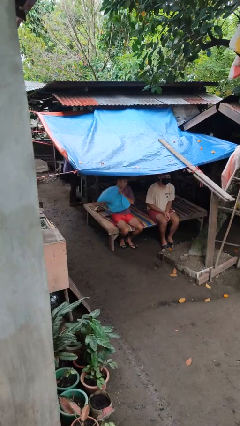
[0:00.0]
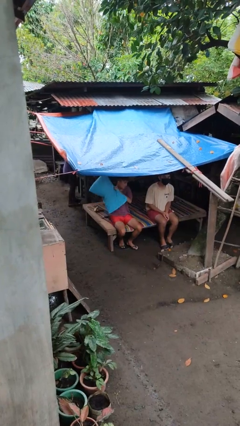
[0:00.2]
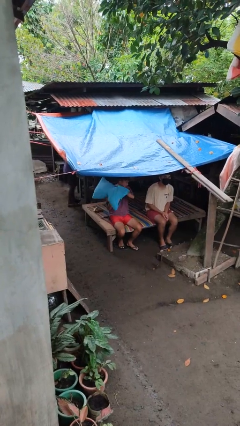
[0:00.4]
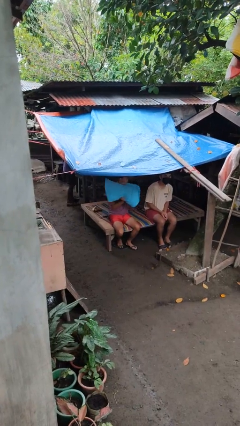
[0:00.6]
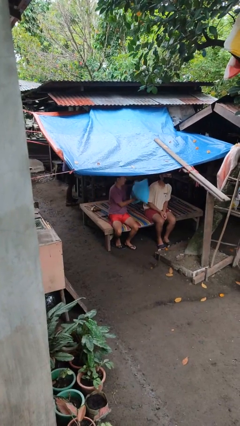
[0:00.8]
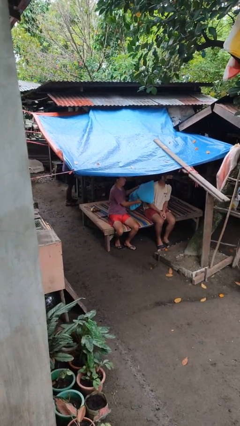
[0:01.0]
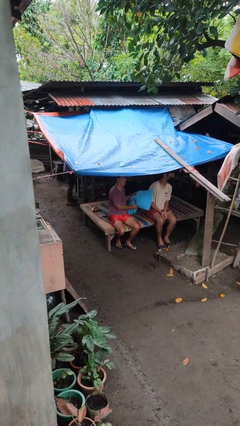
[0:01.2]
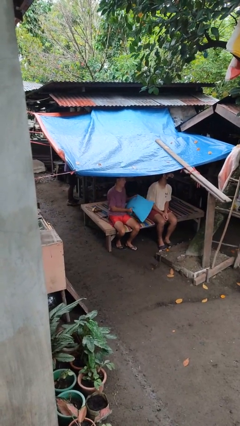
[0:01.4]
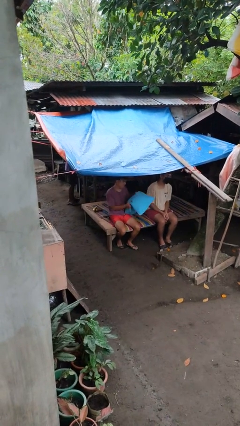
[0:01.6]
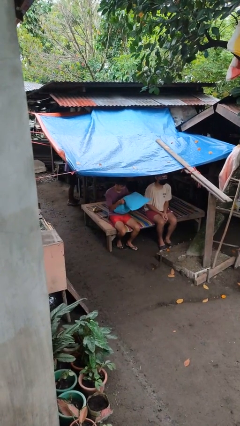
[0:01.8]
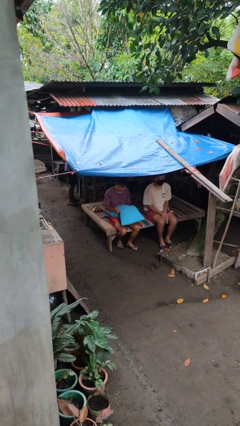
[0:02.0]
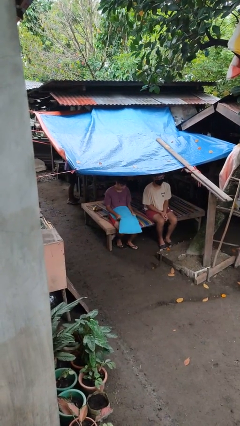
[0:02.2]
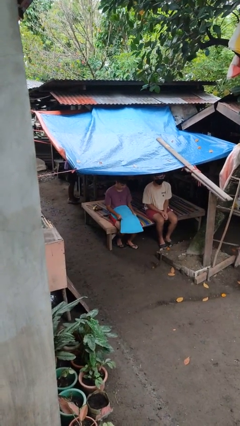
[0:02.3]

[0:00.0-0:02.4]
person hits person with pillow

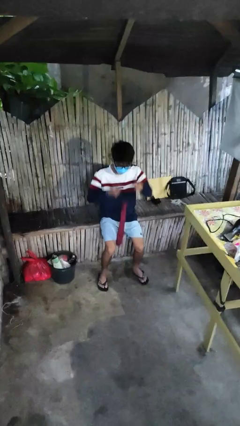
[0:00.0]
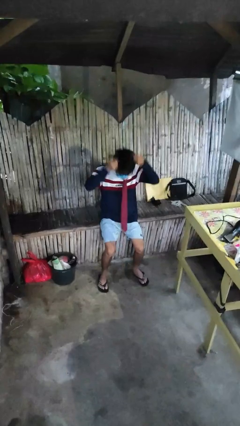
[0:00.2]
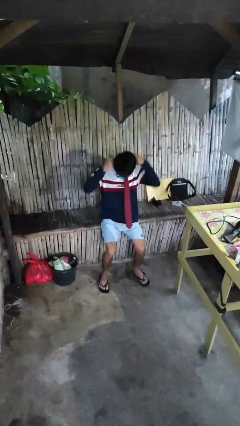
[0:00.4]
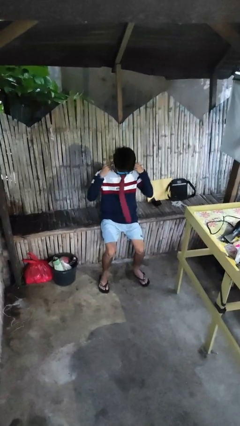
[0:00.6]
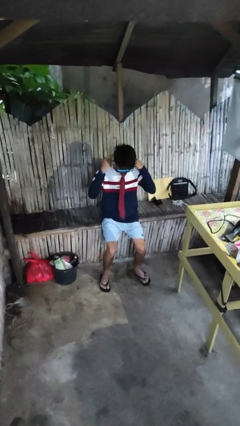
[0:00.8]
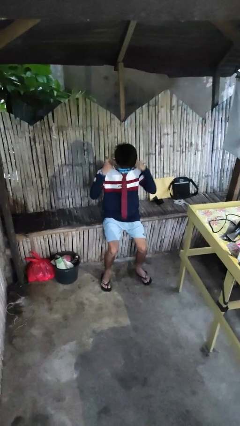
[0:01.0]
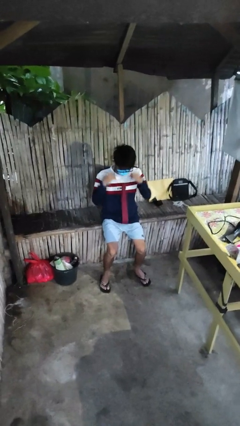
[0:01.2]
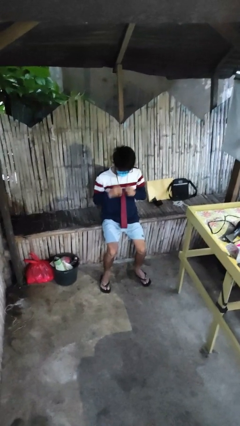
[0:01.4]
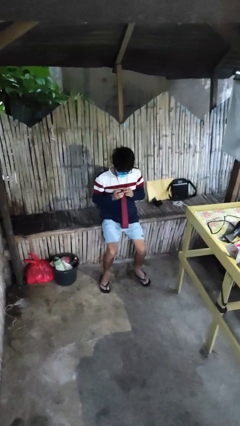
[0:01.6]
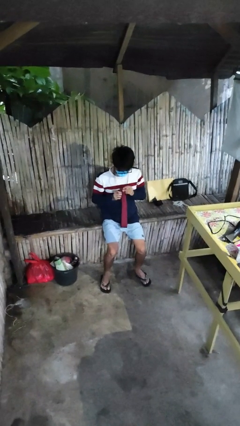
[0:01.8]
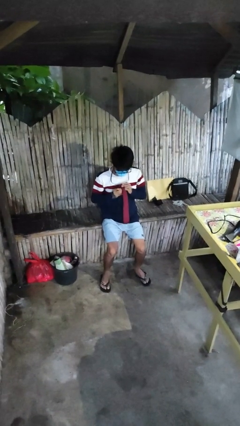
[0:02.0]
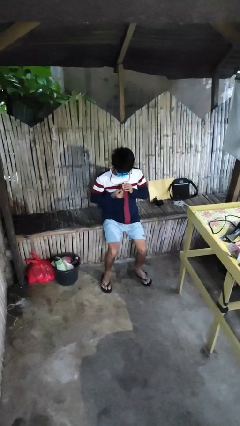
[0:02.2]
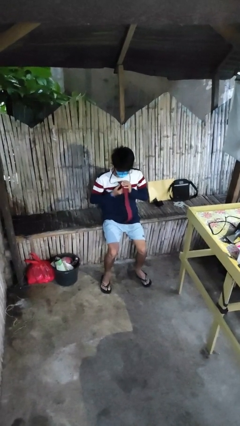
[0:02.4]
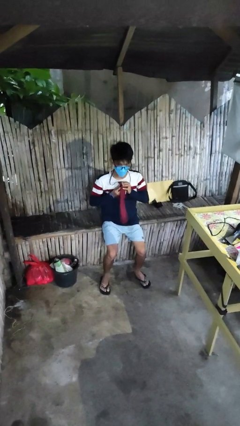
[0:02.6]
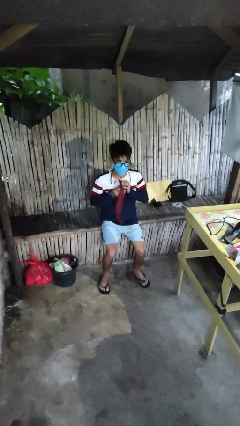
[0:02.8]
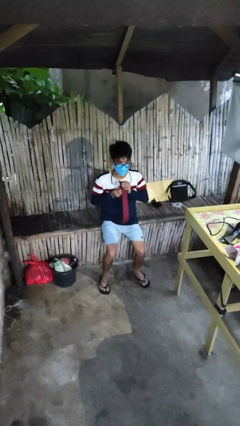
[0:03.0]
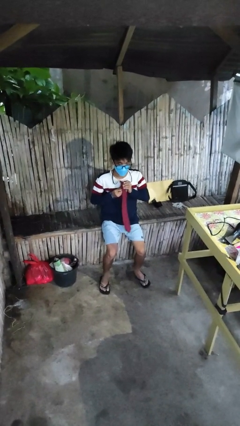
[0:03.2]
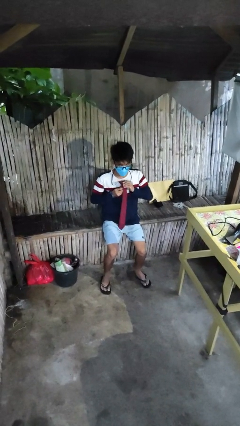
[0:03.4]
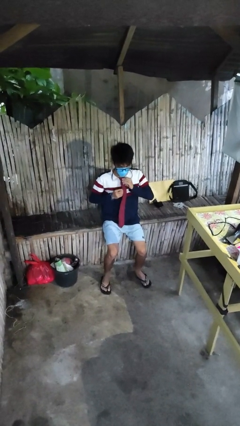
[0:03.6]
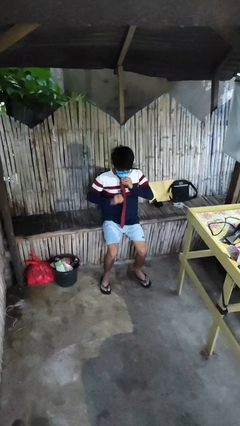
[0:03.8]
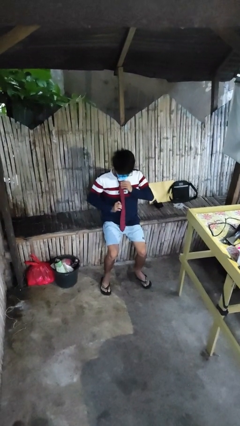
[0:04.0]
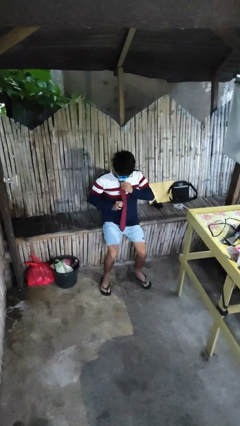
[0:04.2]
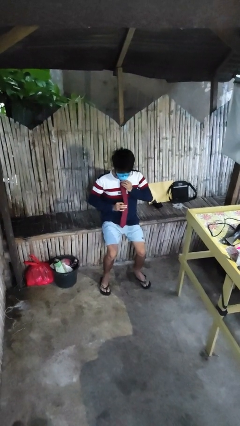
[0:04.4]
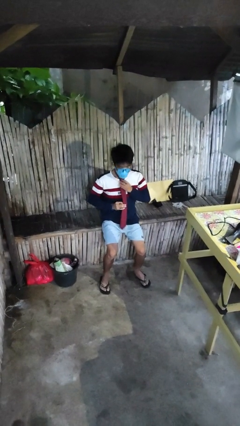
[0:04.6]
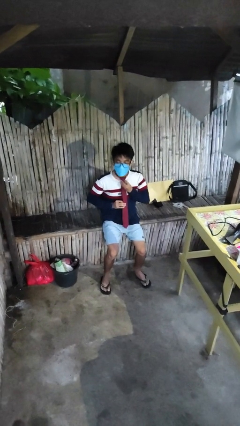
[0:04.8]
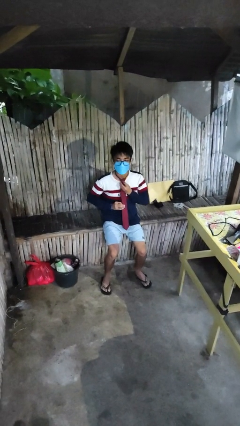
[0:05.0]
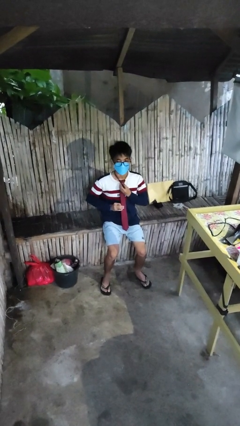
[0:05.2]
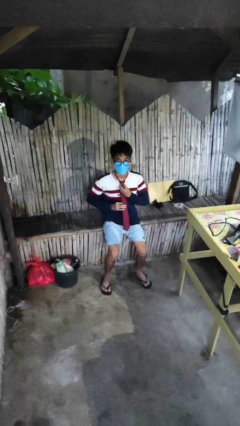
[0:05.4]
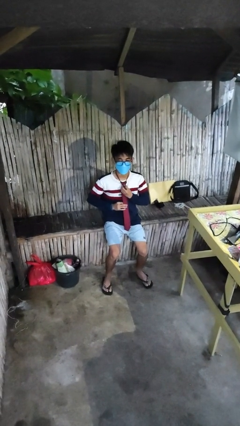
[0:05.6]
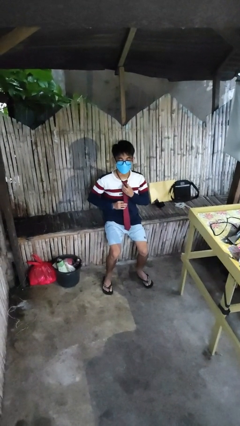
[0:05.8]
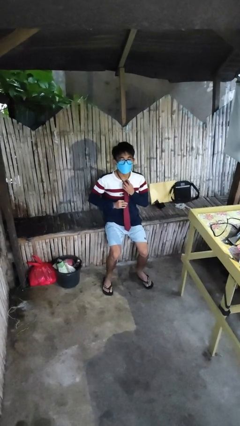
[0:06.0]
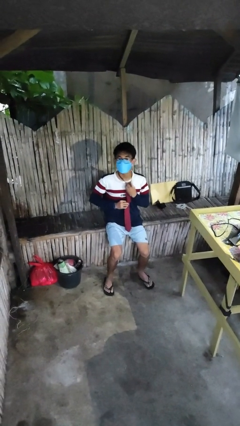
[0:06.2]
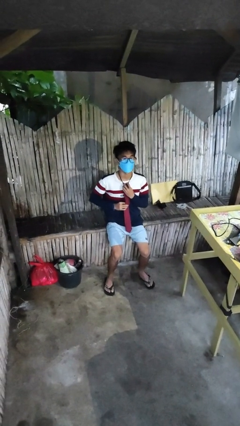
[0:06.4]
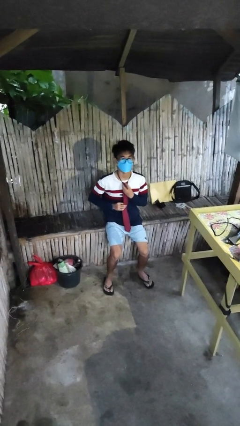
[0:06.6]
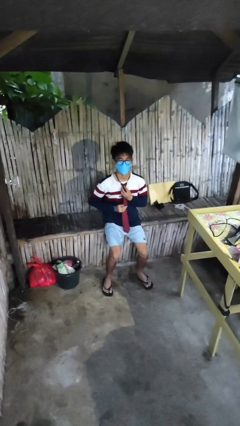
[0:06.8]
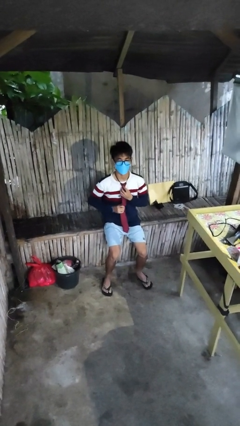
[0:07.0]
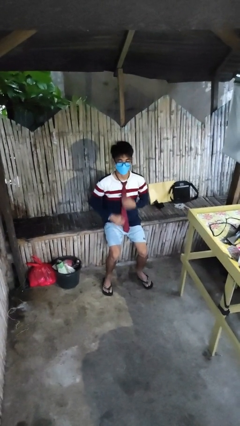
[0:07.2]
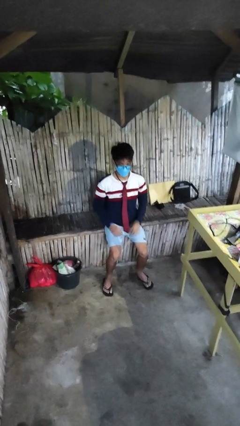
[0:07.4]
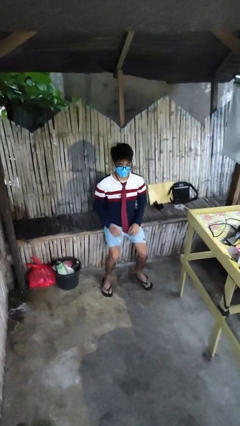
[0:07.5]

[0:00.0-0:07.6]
person puts on necktie

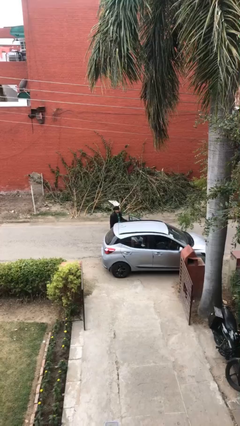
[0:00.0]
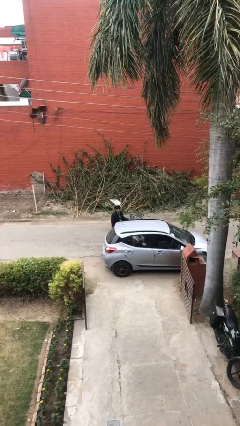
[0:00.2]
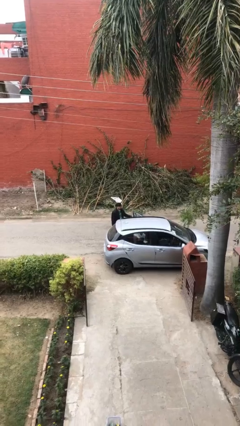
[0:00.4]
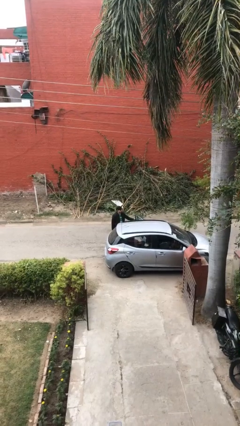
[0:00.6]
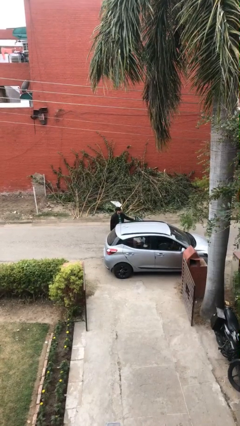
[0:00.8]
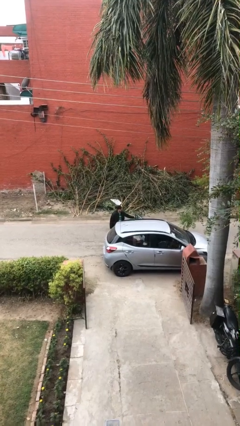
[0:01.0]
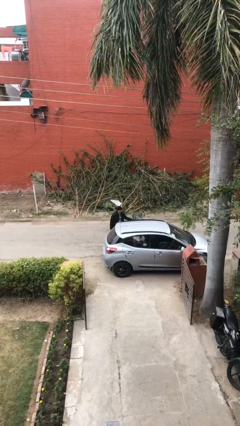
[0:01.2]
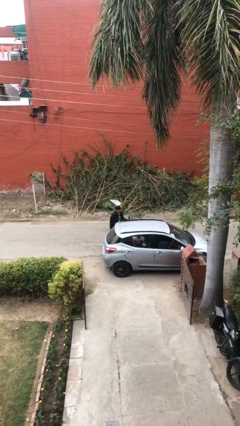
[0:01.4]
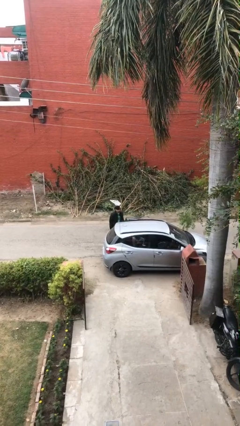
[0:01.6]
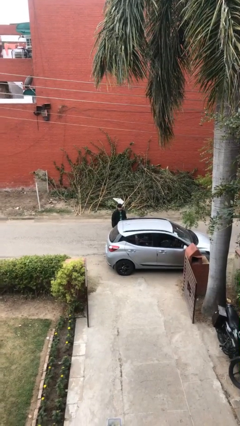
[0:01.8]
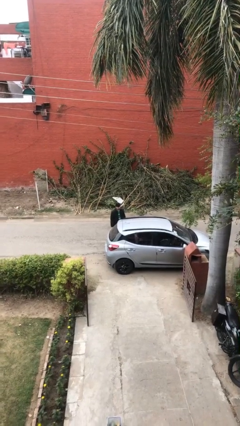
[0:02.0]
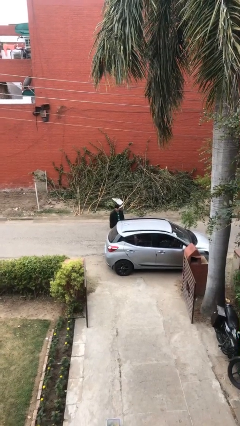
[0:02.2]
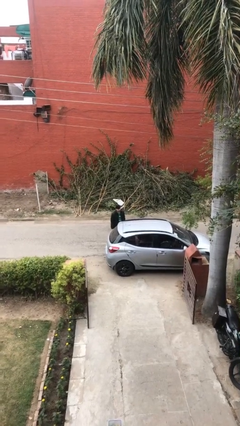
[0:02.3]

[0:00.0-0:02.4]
person closes car door

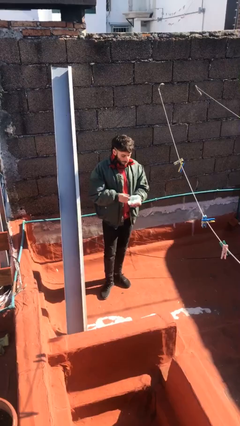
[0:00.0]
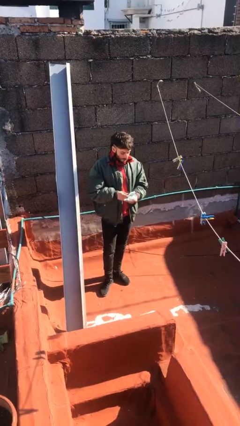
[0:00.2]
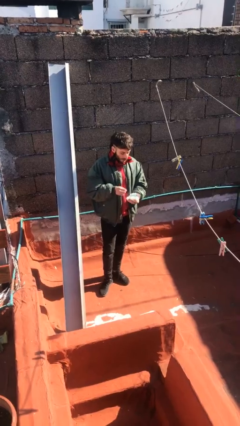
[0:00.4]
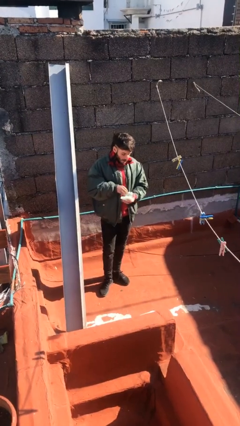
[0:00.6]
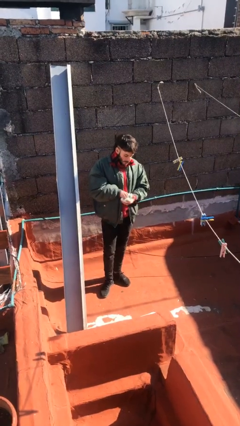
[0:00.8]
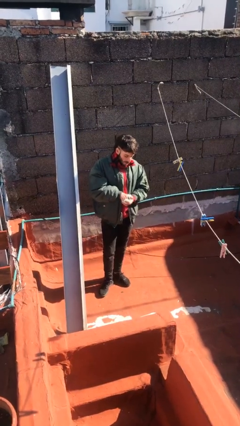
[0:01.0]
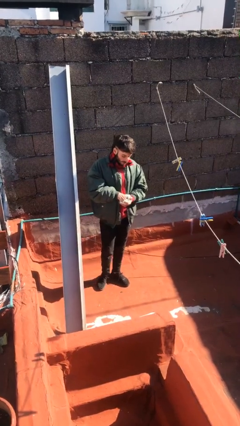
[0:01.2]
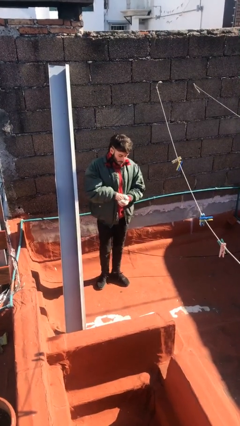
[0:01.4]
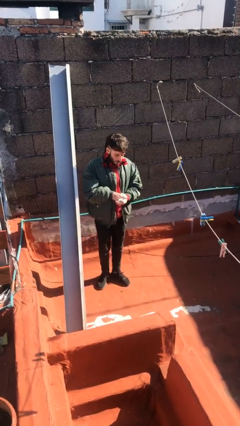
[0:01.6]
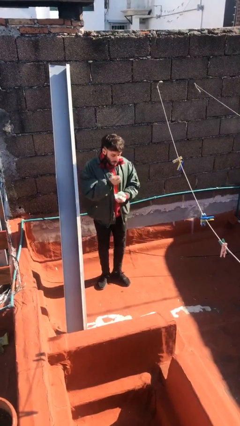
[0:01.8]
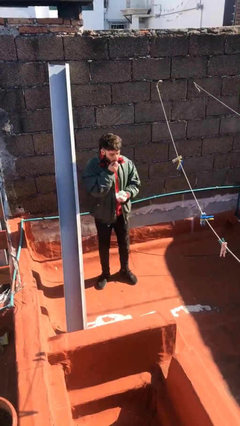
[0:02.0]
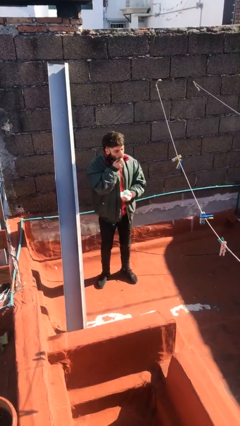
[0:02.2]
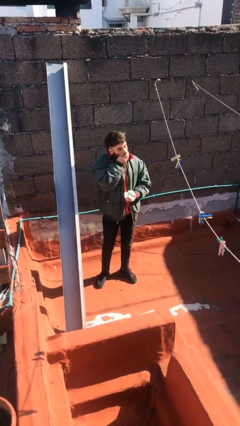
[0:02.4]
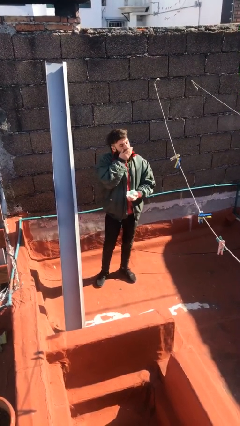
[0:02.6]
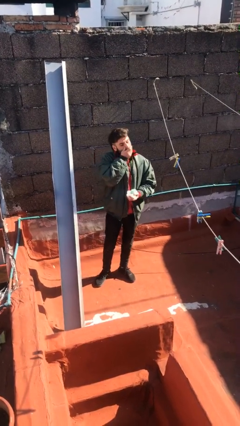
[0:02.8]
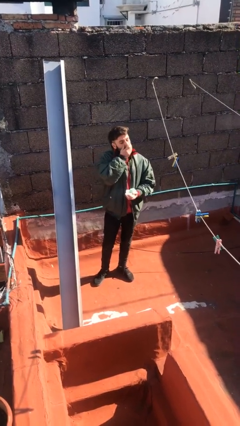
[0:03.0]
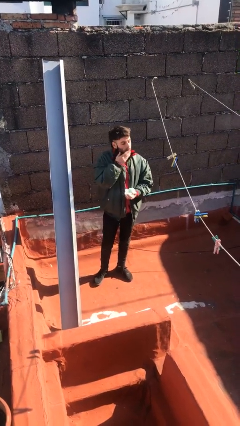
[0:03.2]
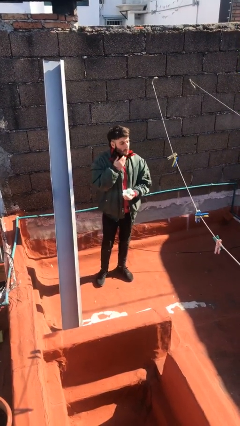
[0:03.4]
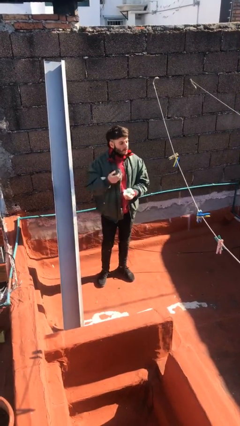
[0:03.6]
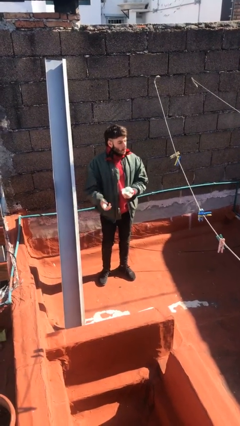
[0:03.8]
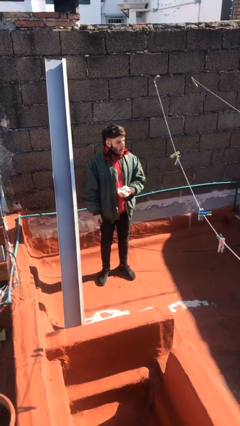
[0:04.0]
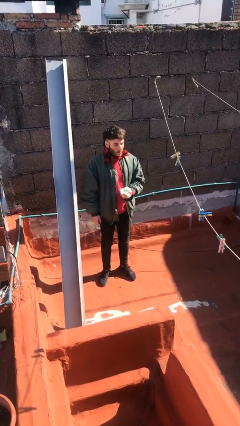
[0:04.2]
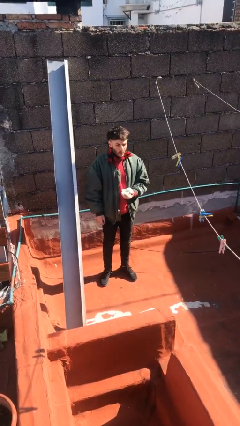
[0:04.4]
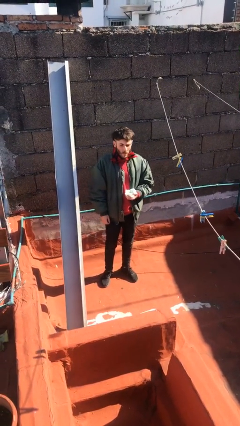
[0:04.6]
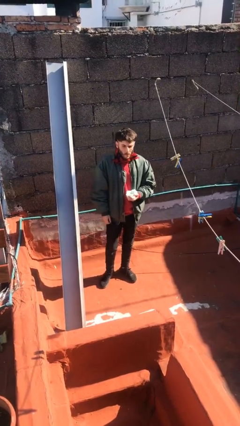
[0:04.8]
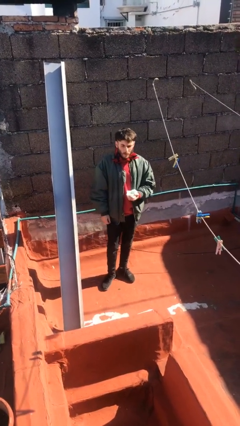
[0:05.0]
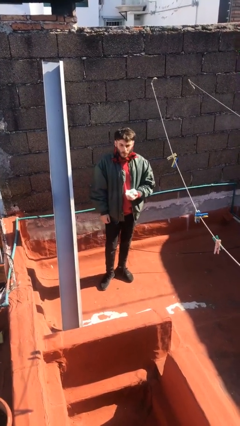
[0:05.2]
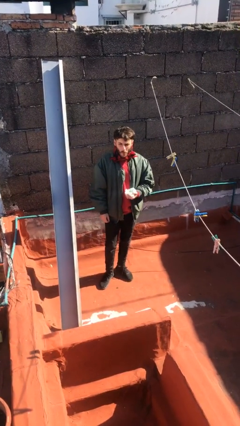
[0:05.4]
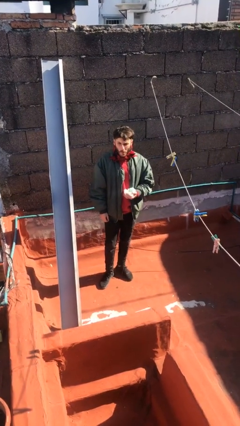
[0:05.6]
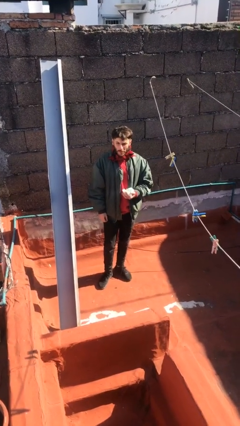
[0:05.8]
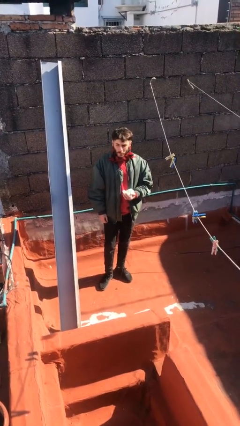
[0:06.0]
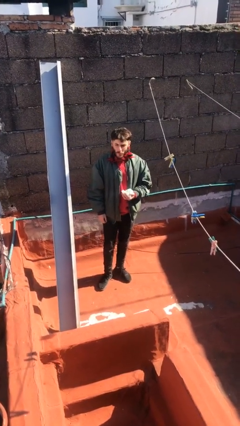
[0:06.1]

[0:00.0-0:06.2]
person eats snack from bag
